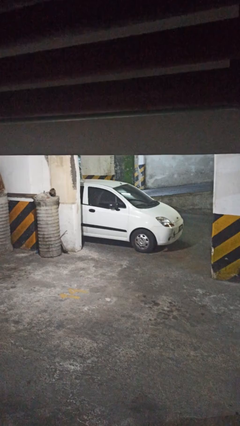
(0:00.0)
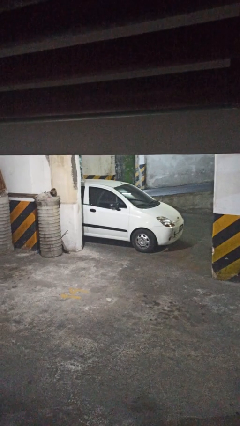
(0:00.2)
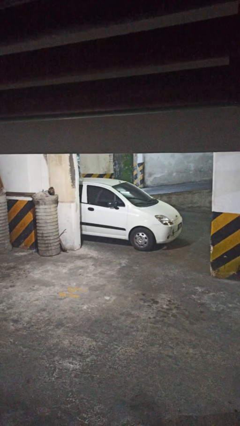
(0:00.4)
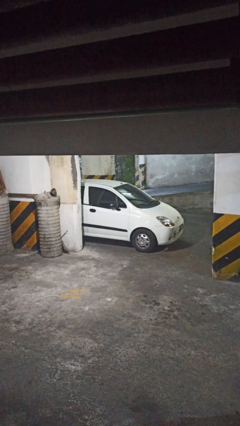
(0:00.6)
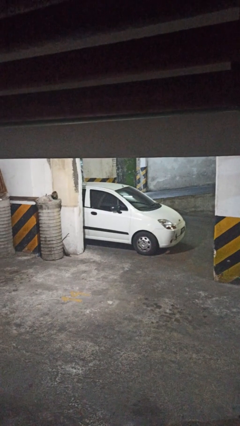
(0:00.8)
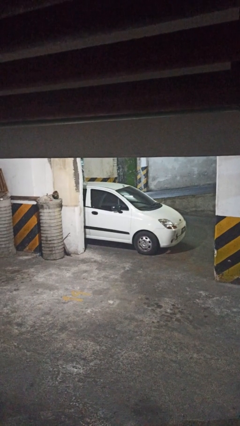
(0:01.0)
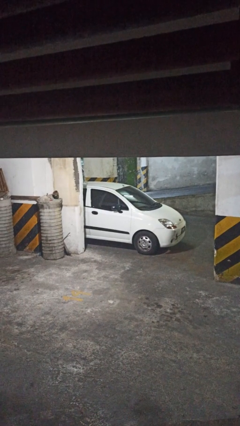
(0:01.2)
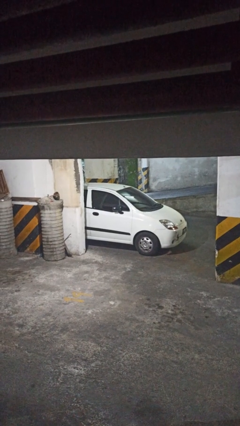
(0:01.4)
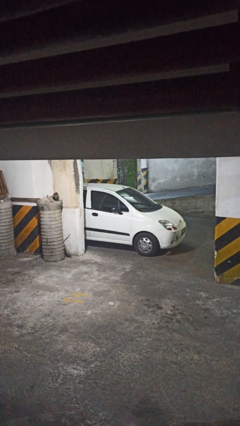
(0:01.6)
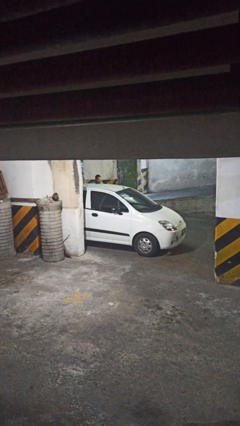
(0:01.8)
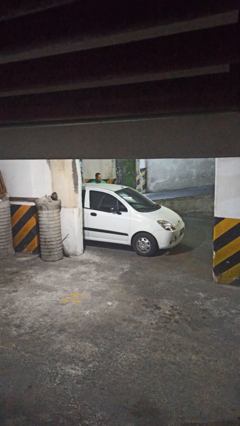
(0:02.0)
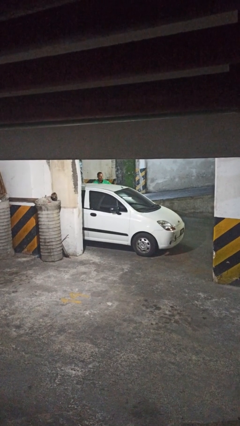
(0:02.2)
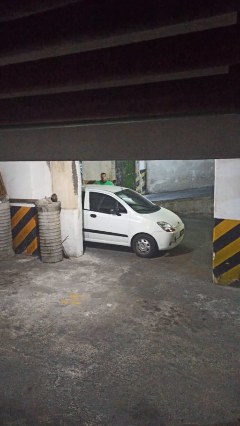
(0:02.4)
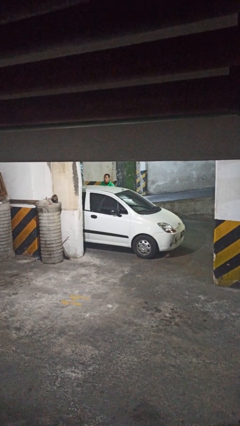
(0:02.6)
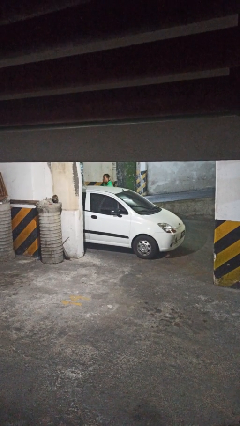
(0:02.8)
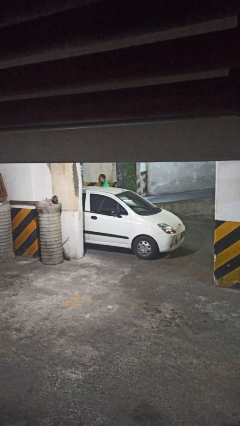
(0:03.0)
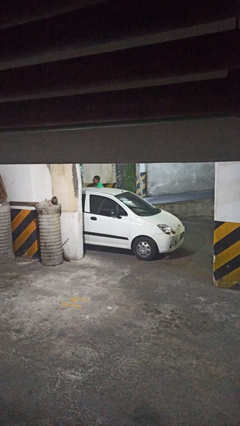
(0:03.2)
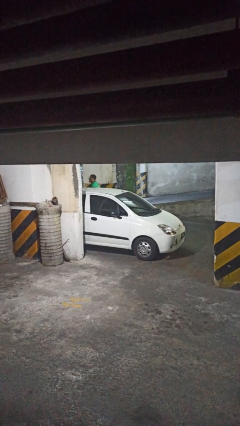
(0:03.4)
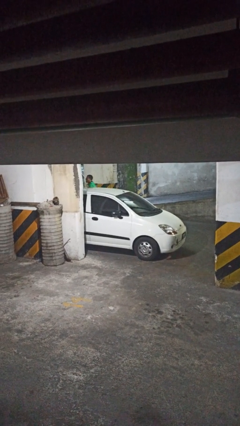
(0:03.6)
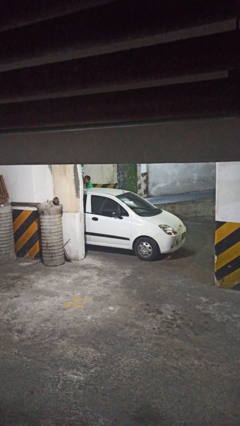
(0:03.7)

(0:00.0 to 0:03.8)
car drops off person

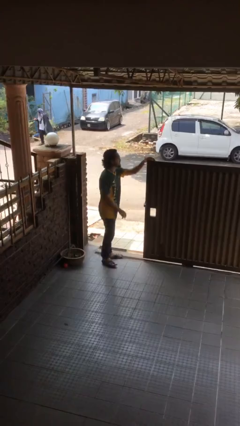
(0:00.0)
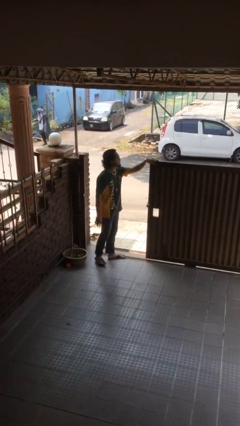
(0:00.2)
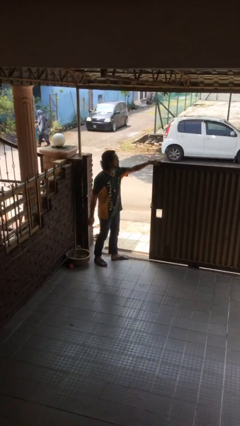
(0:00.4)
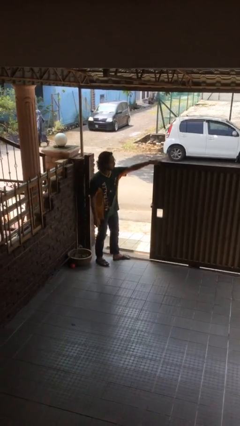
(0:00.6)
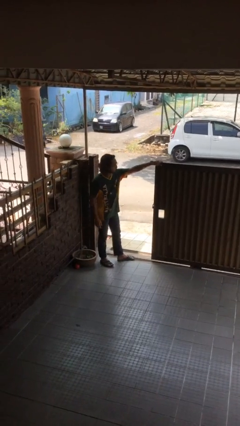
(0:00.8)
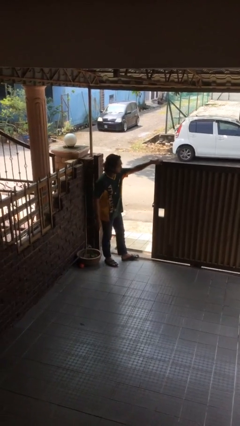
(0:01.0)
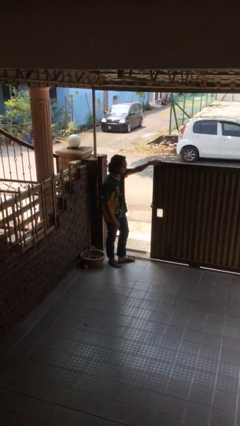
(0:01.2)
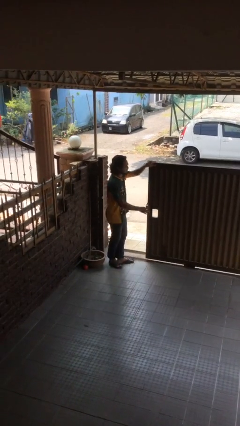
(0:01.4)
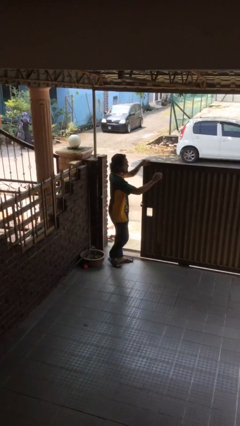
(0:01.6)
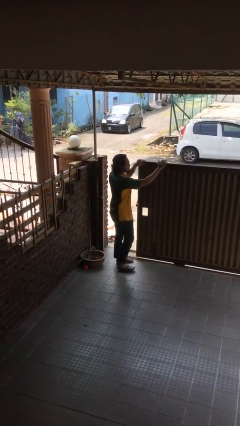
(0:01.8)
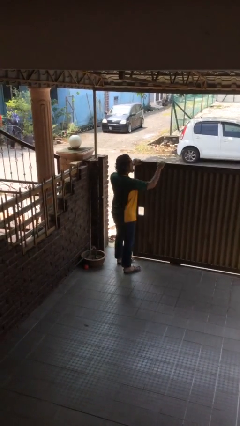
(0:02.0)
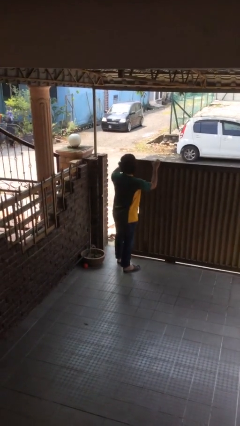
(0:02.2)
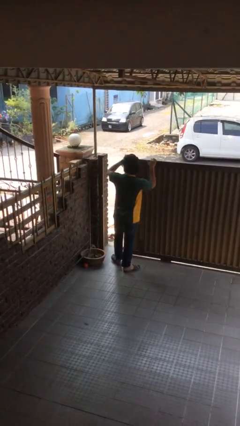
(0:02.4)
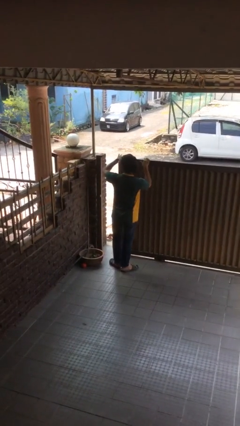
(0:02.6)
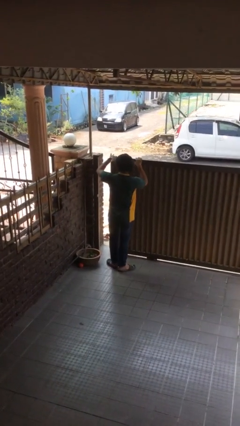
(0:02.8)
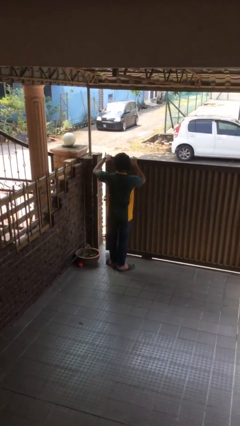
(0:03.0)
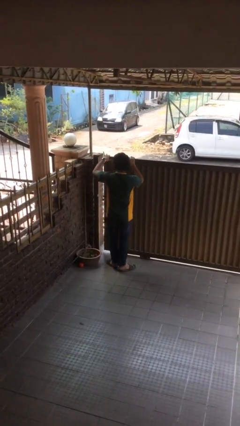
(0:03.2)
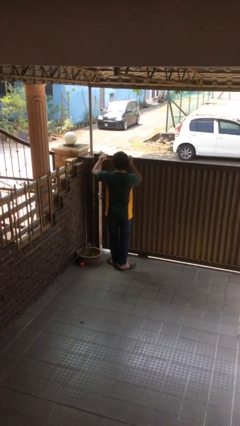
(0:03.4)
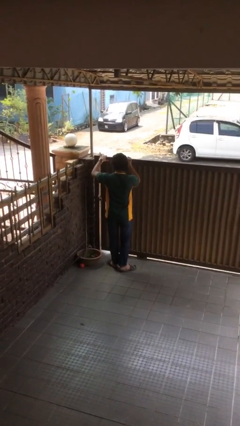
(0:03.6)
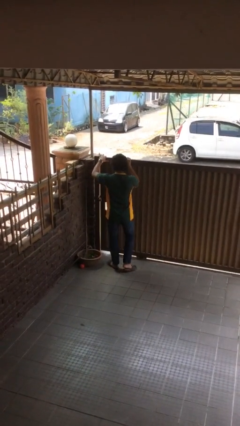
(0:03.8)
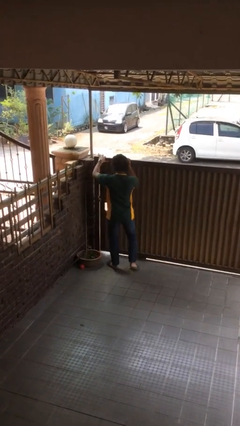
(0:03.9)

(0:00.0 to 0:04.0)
person closes facility door

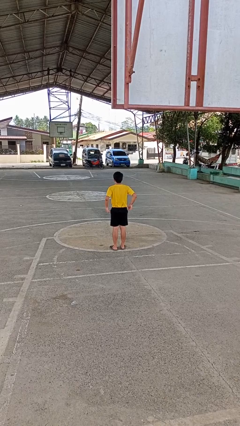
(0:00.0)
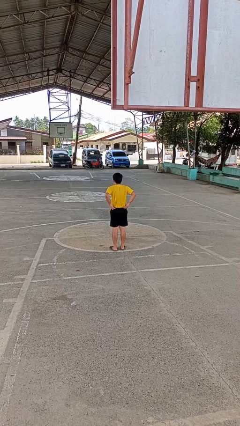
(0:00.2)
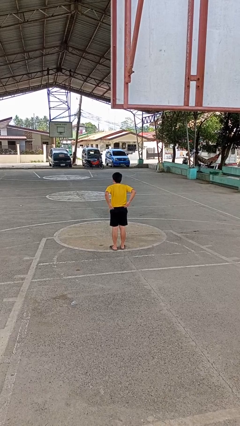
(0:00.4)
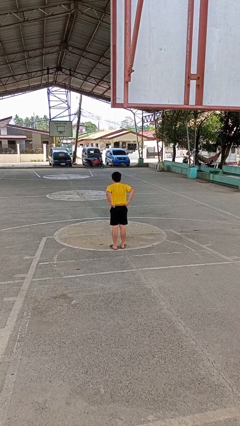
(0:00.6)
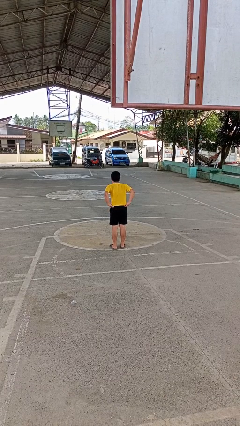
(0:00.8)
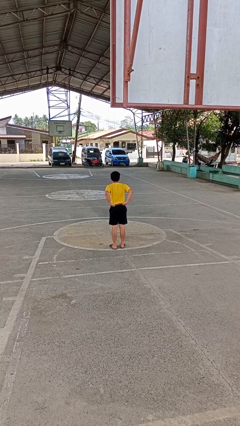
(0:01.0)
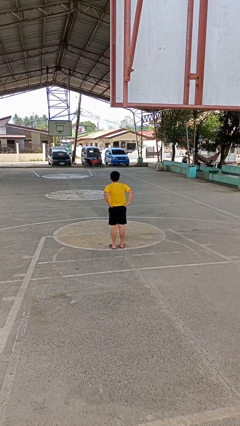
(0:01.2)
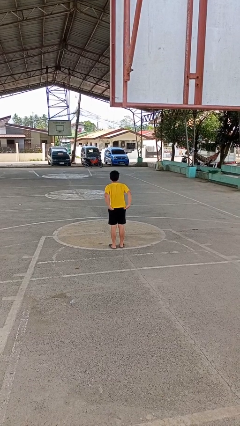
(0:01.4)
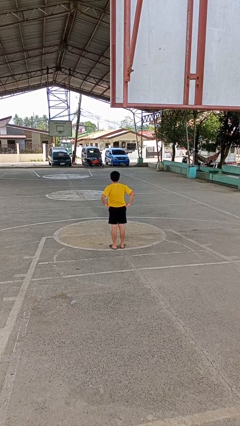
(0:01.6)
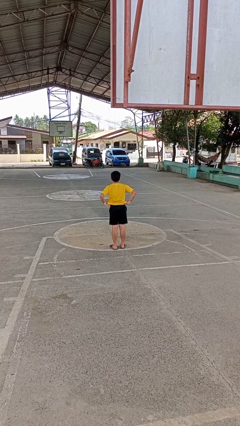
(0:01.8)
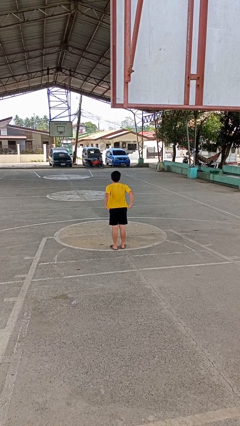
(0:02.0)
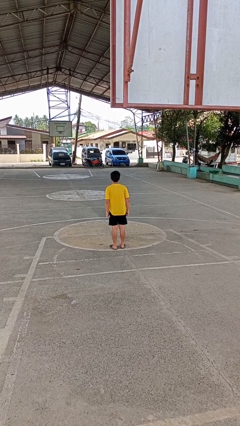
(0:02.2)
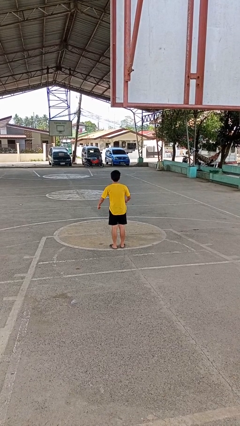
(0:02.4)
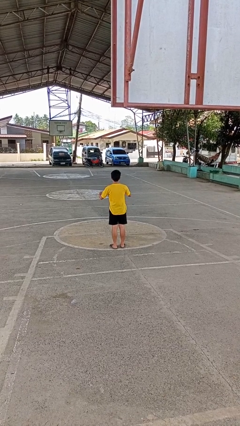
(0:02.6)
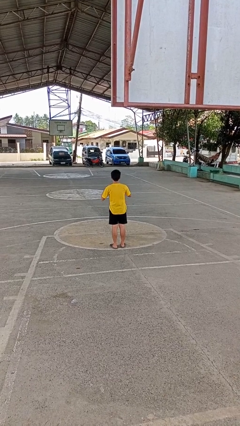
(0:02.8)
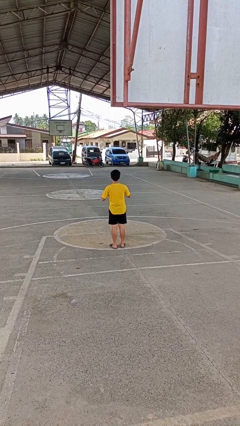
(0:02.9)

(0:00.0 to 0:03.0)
person untucks shirt

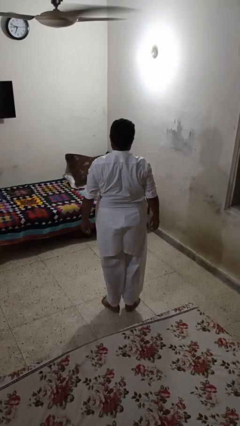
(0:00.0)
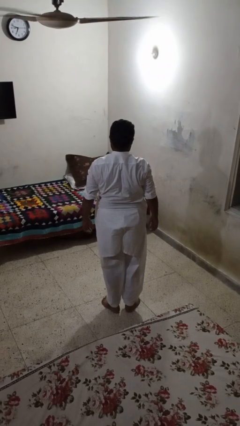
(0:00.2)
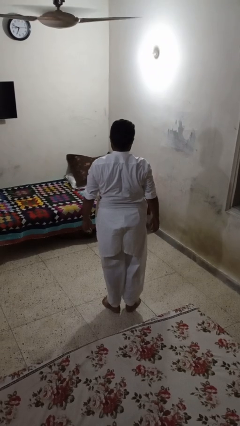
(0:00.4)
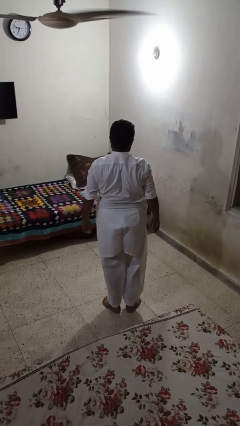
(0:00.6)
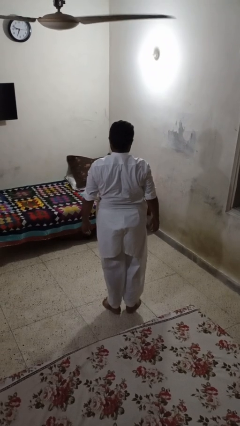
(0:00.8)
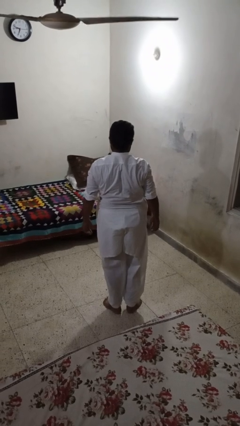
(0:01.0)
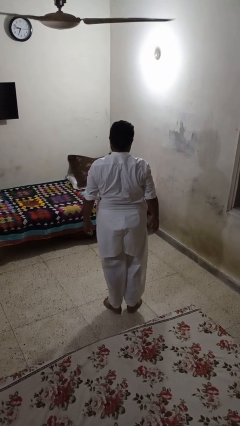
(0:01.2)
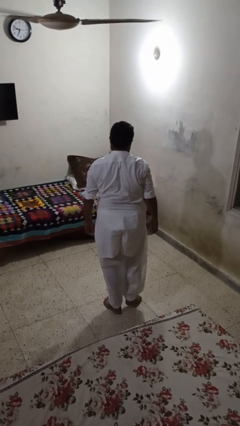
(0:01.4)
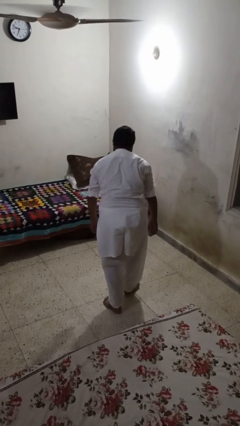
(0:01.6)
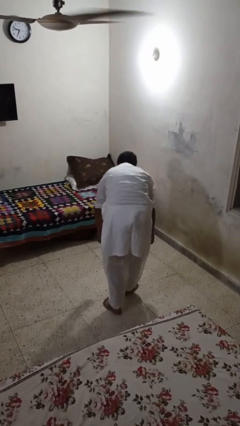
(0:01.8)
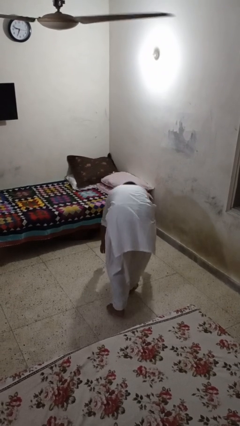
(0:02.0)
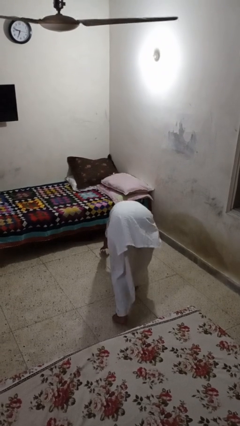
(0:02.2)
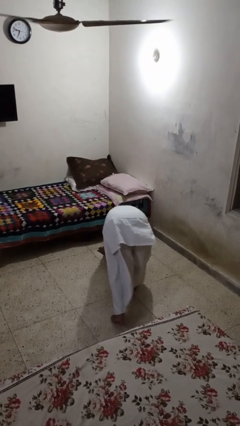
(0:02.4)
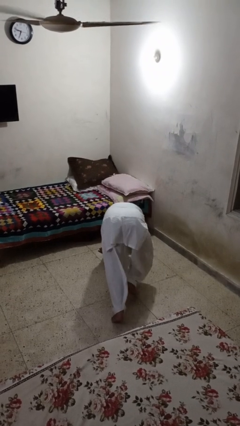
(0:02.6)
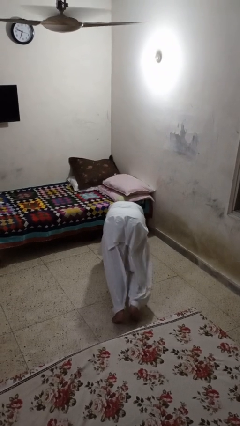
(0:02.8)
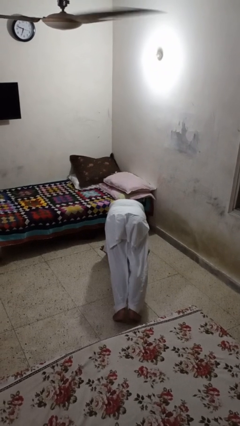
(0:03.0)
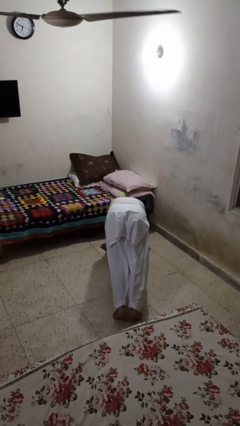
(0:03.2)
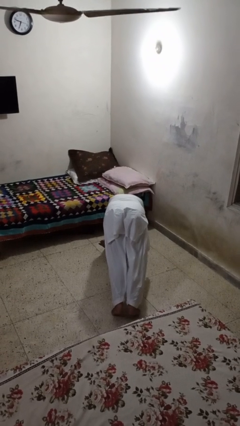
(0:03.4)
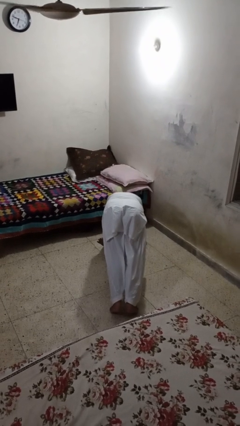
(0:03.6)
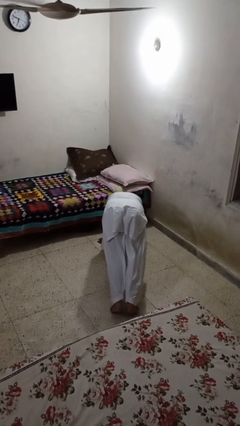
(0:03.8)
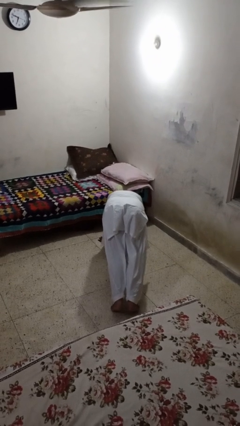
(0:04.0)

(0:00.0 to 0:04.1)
person exercises with plank

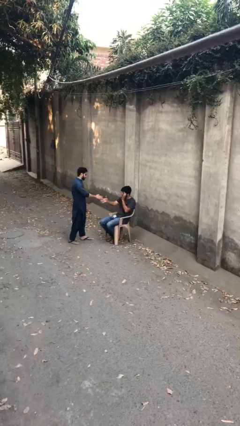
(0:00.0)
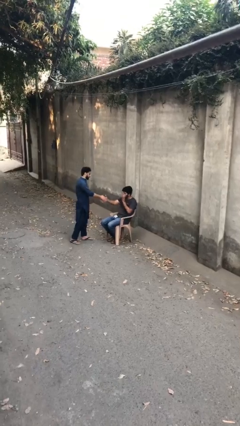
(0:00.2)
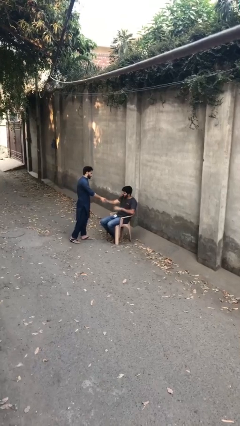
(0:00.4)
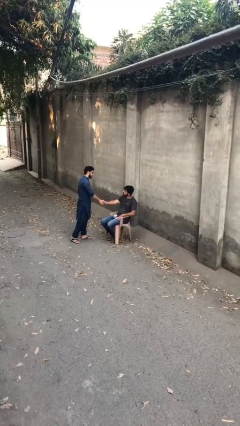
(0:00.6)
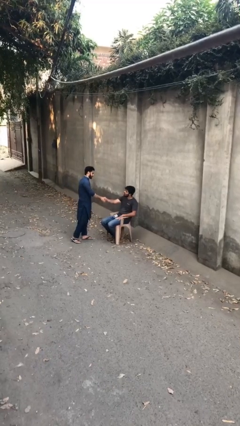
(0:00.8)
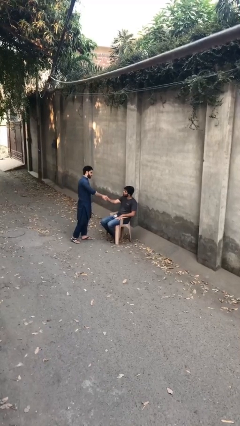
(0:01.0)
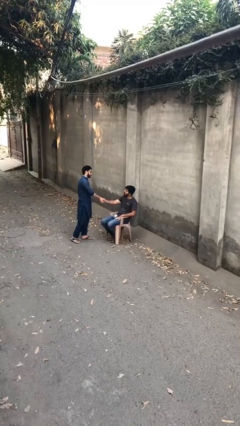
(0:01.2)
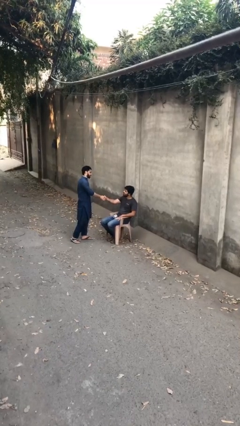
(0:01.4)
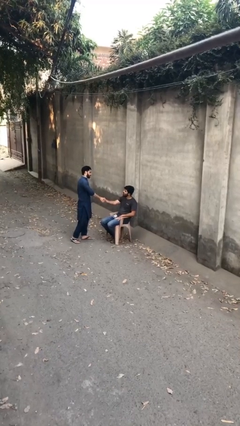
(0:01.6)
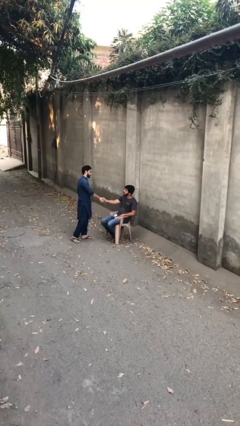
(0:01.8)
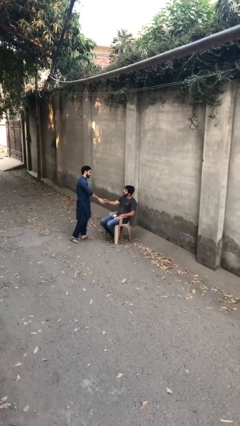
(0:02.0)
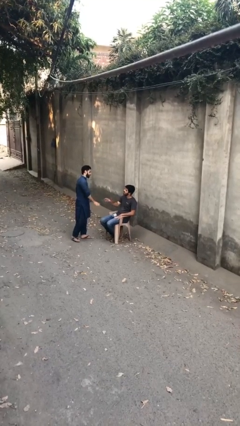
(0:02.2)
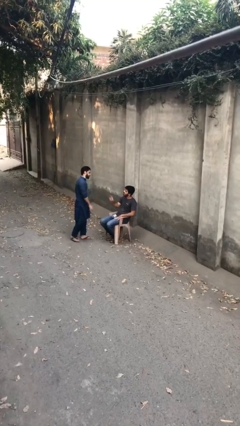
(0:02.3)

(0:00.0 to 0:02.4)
person shakes hand

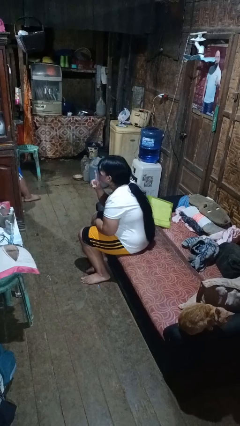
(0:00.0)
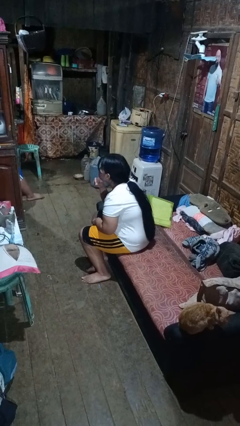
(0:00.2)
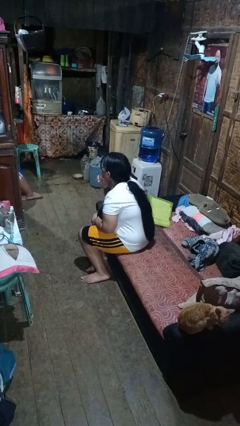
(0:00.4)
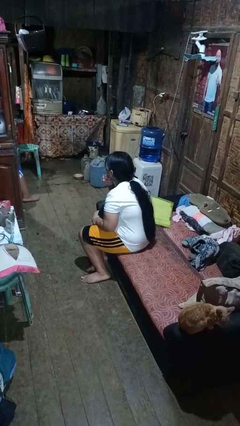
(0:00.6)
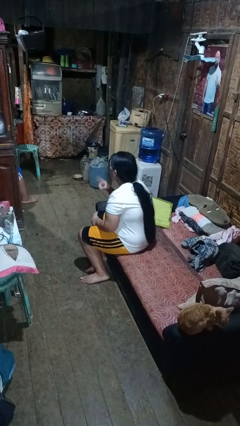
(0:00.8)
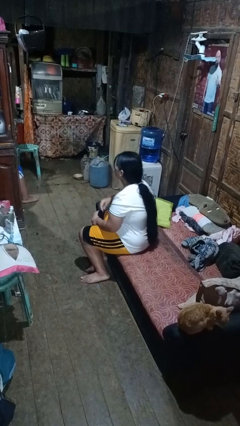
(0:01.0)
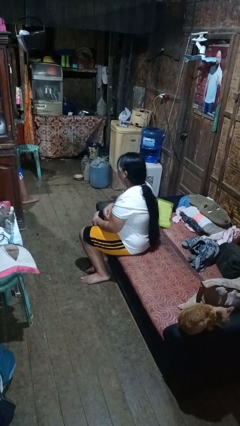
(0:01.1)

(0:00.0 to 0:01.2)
person gestures be quiet
